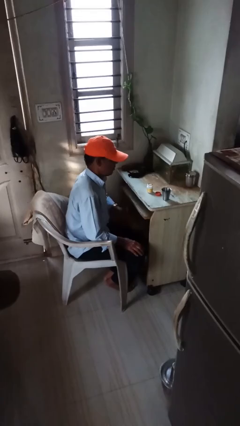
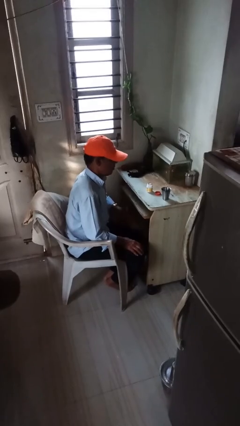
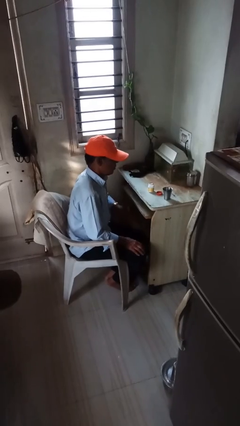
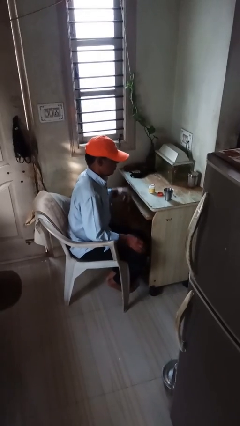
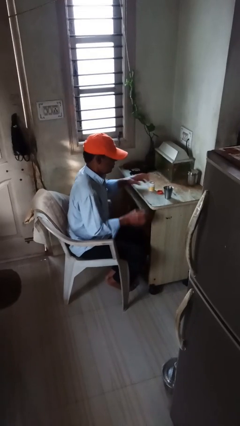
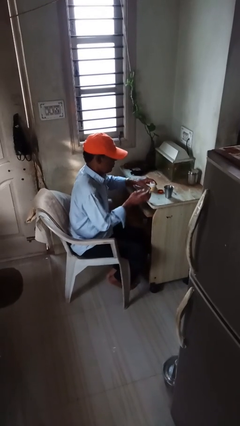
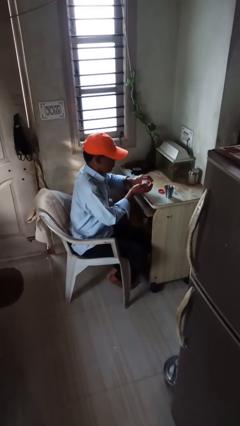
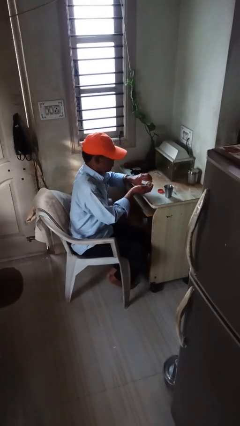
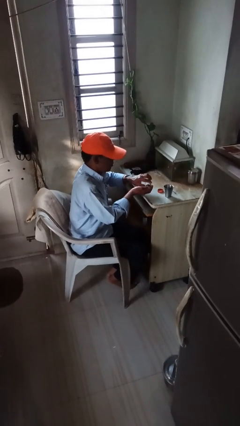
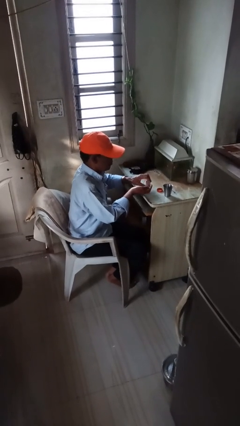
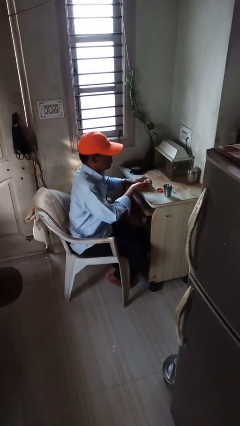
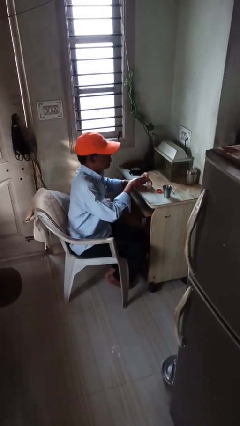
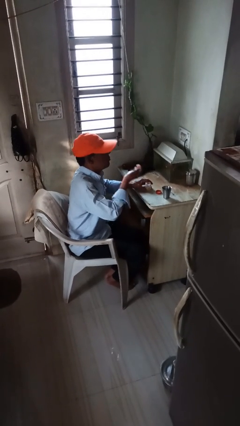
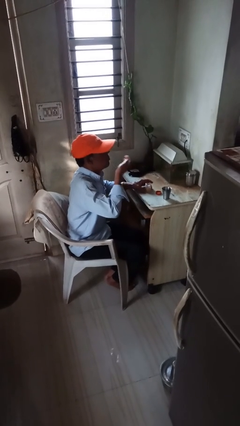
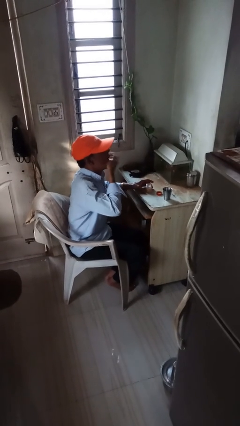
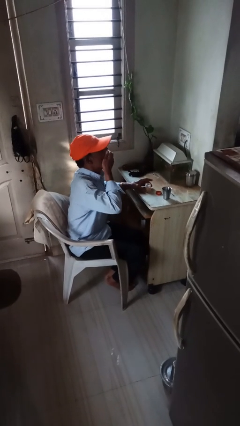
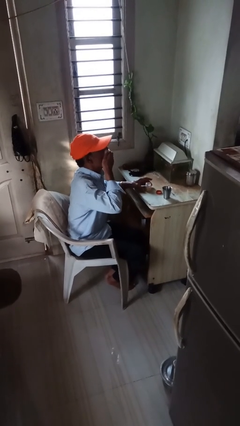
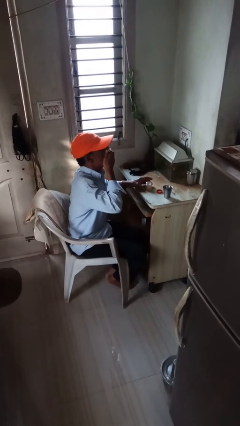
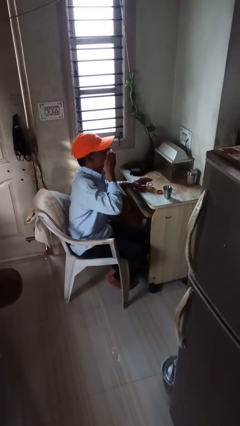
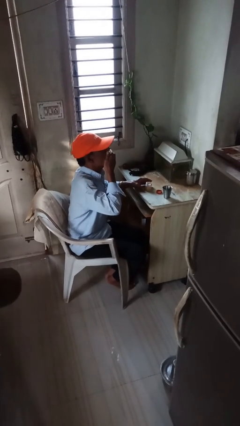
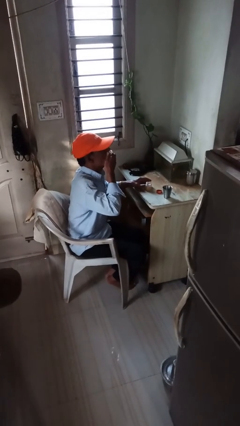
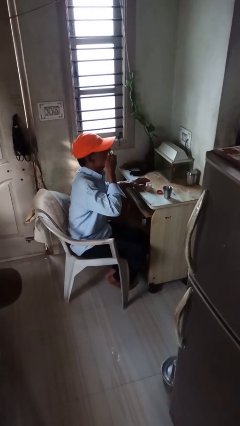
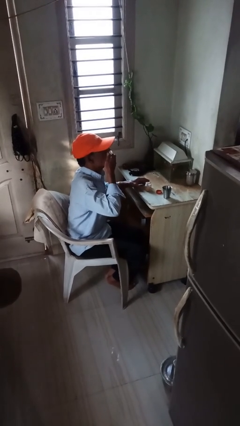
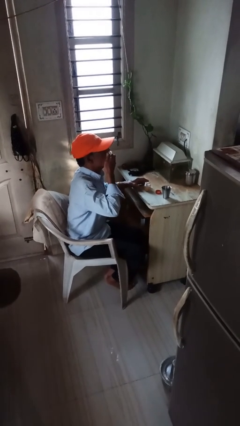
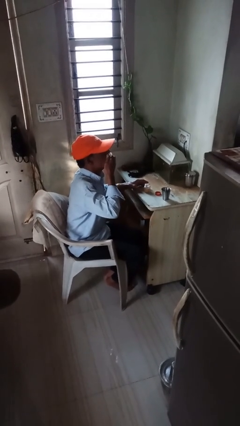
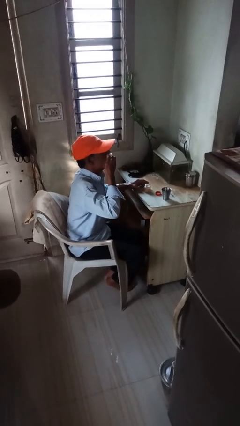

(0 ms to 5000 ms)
person takes medicine pills

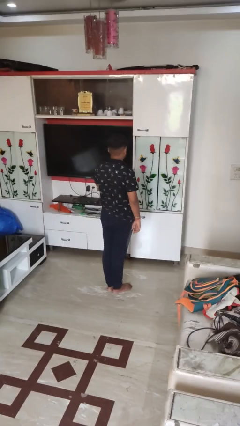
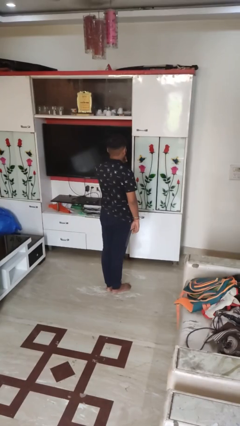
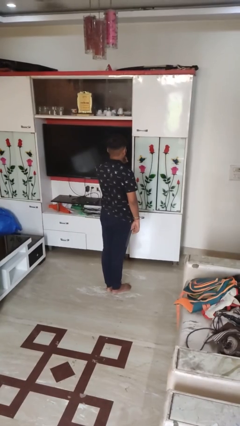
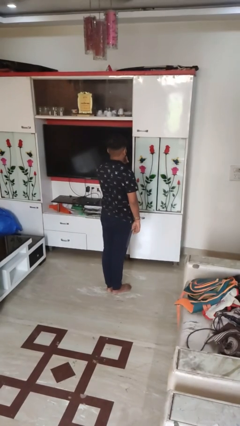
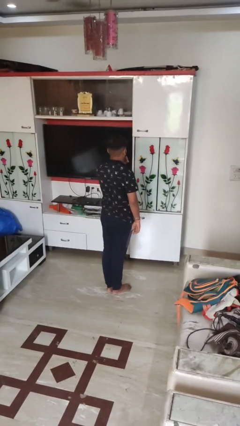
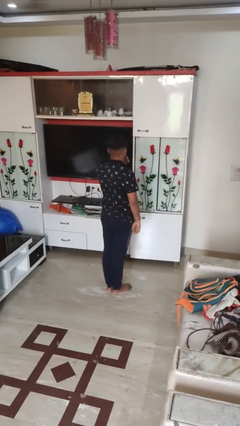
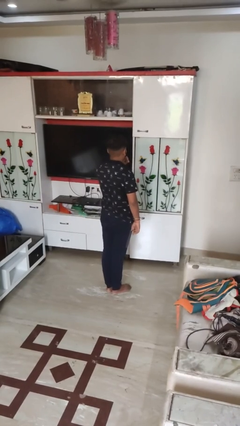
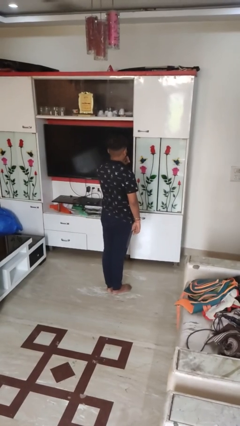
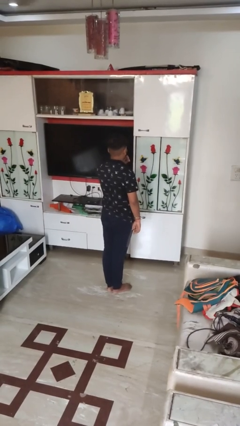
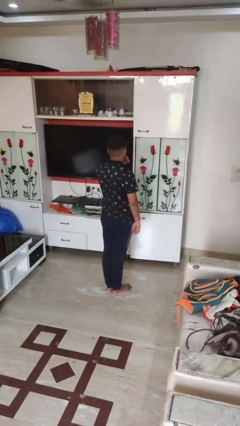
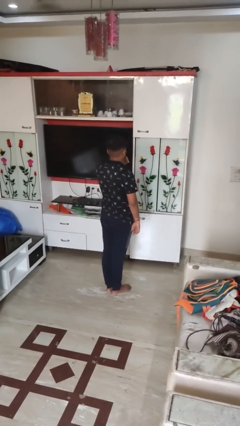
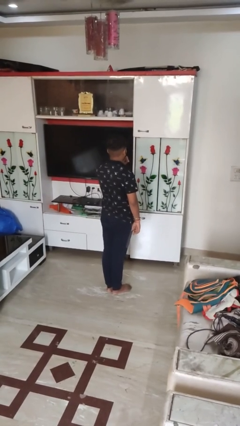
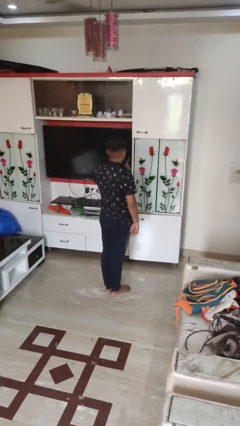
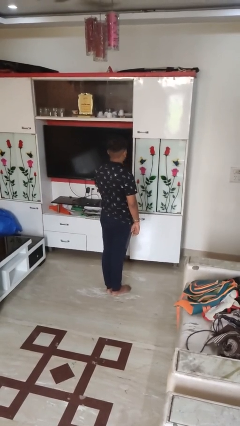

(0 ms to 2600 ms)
person gestures be quiet

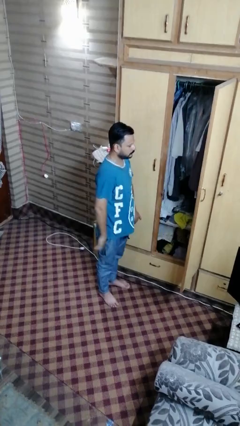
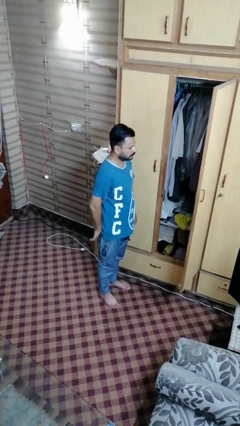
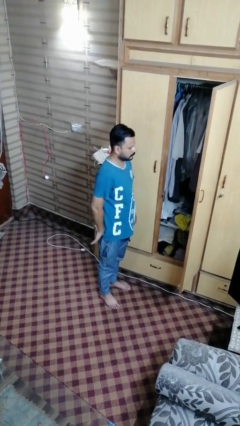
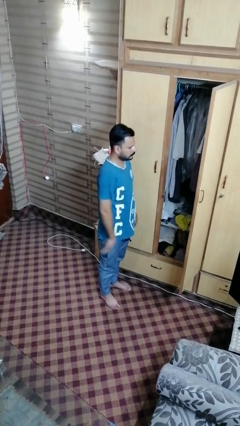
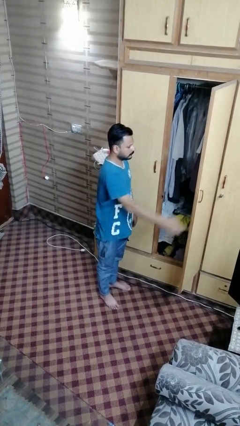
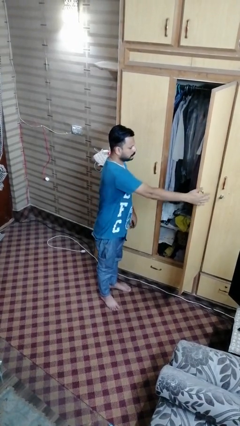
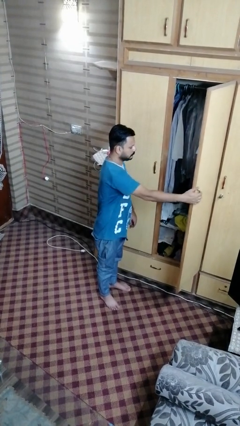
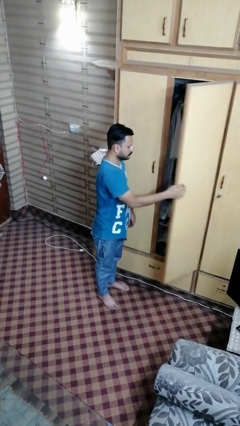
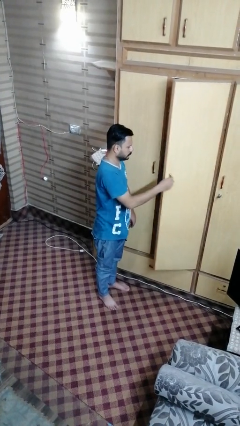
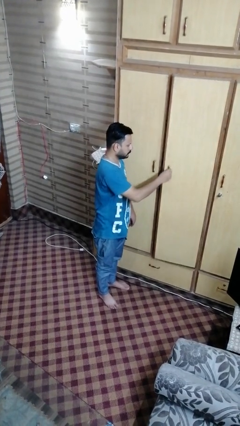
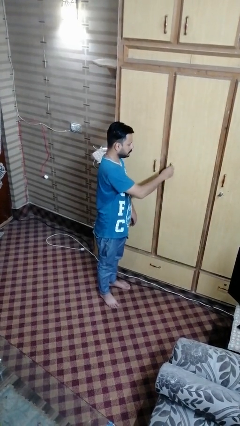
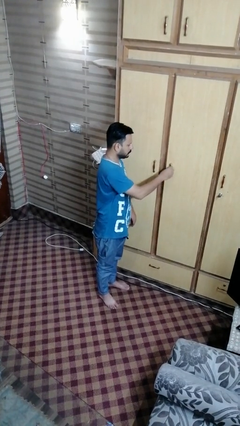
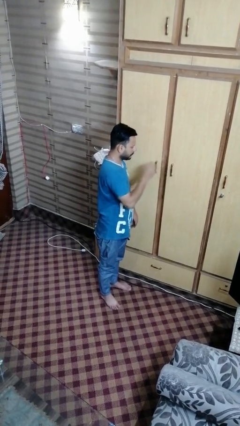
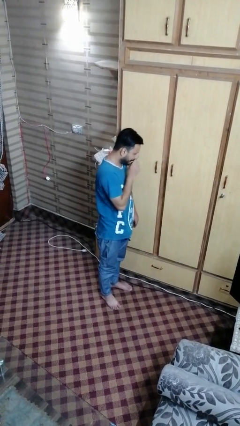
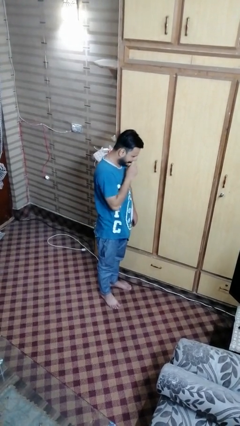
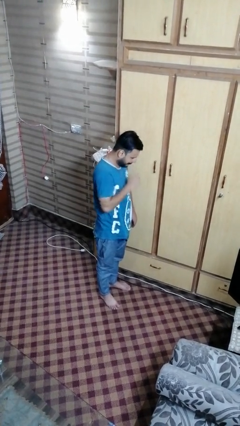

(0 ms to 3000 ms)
person closes closet door

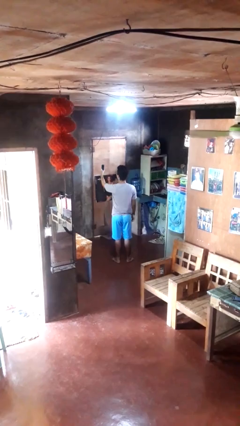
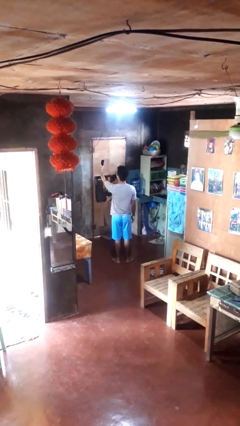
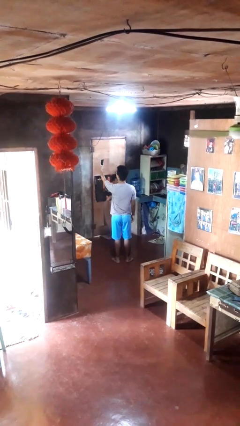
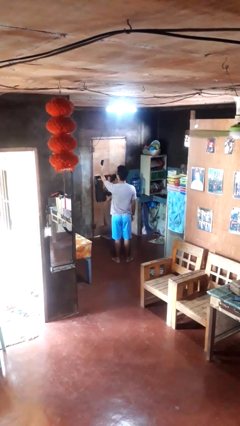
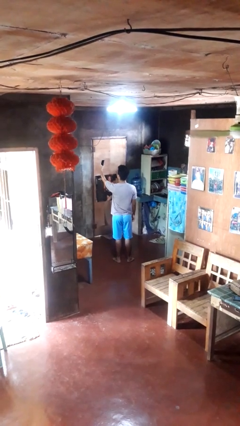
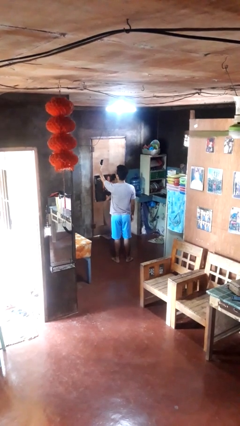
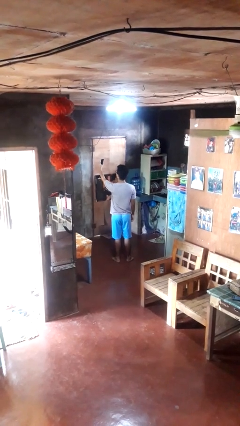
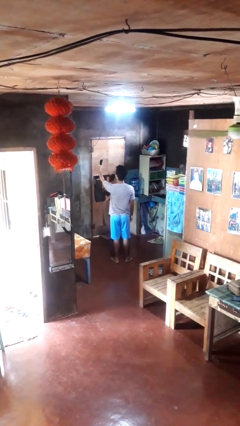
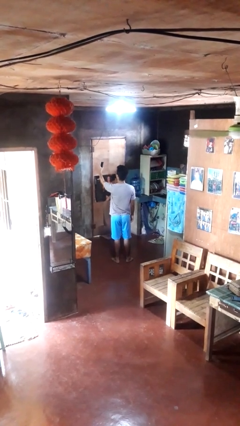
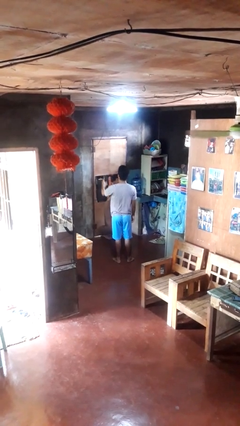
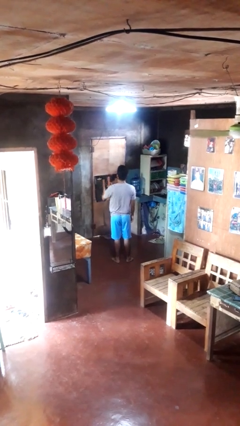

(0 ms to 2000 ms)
person takes selfie

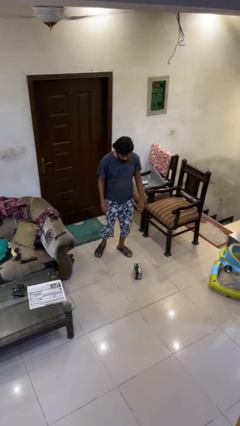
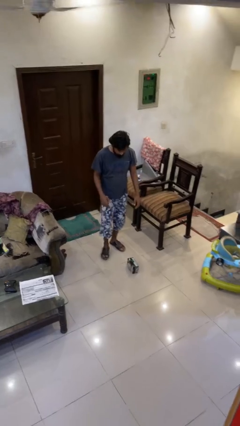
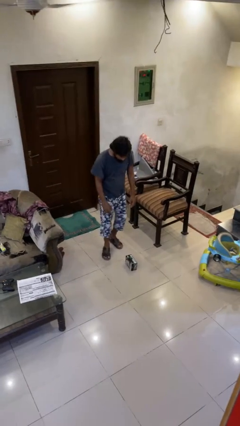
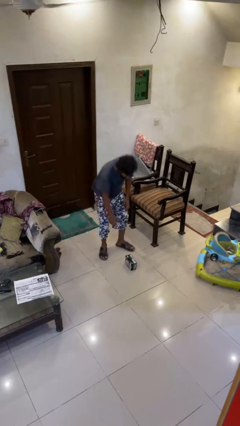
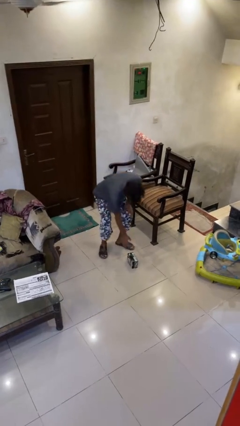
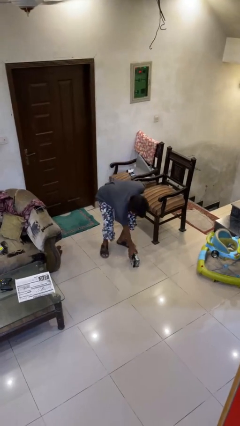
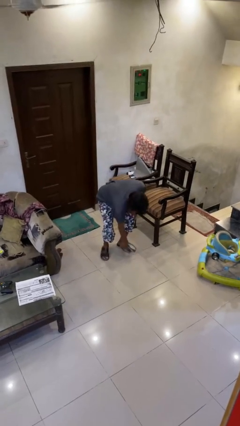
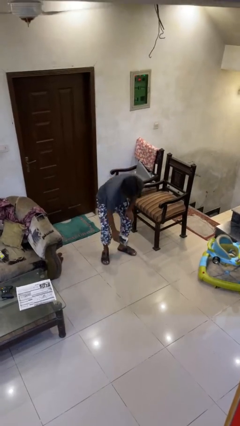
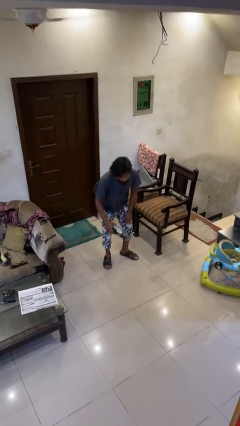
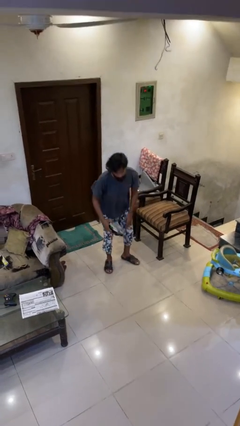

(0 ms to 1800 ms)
person picks up object from floor

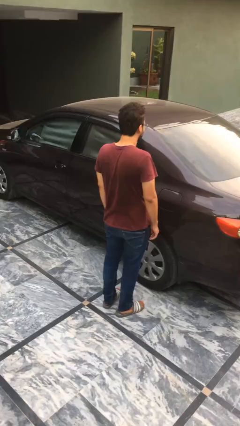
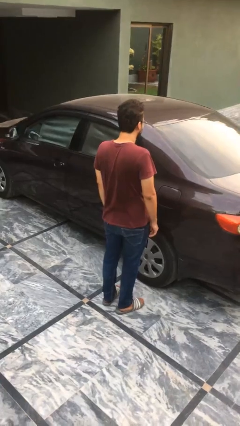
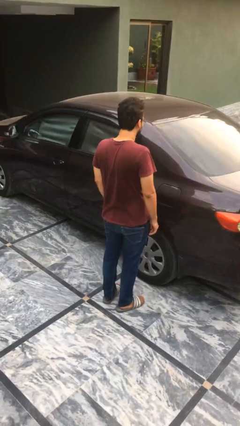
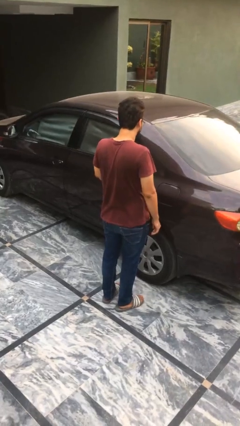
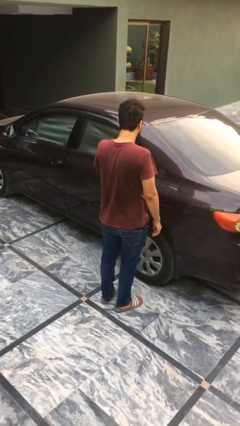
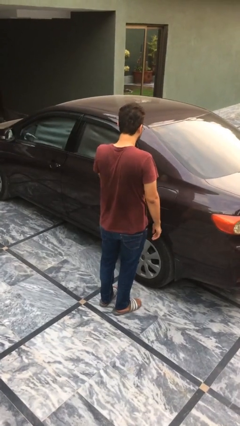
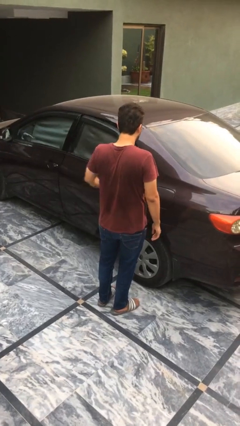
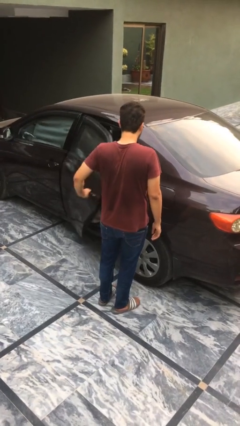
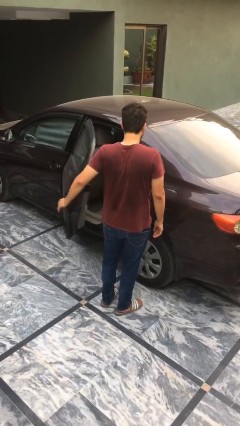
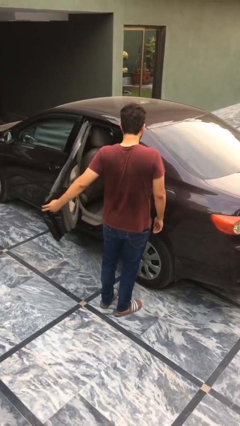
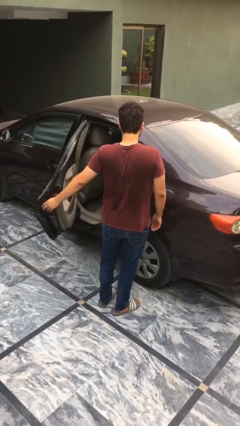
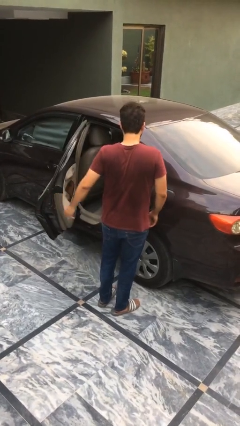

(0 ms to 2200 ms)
person opens car door

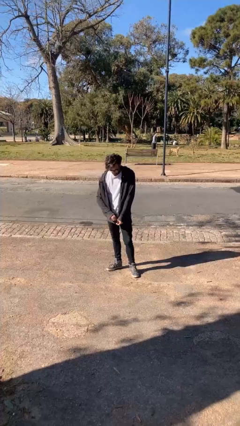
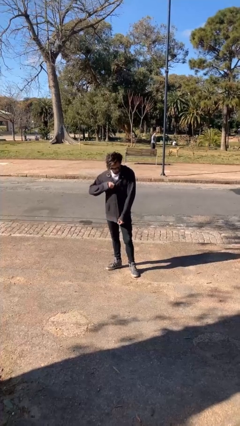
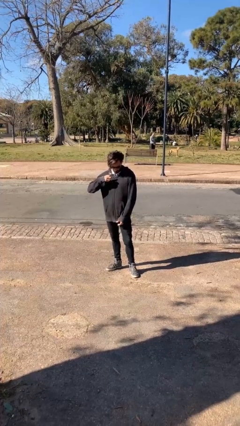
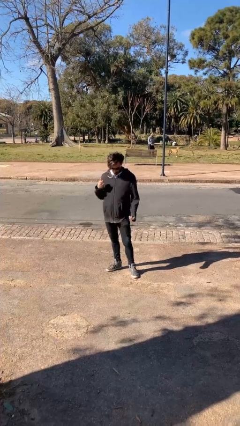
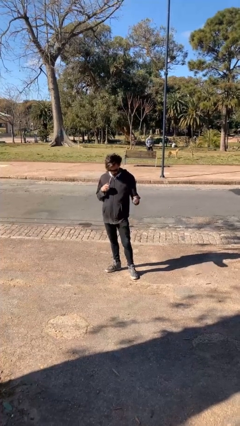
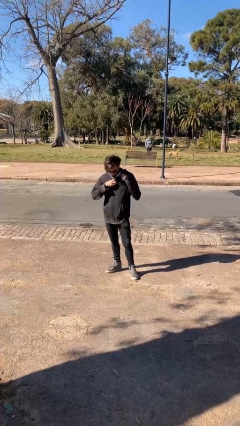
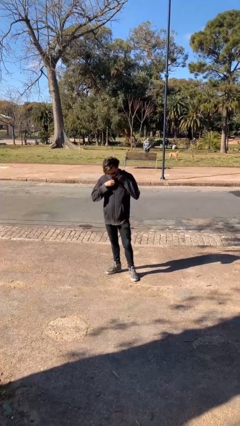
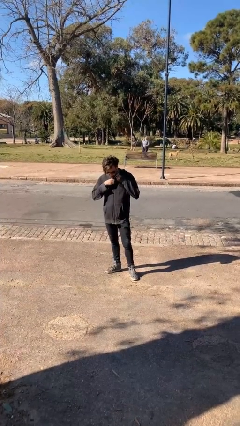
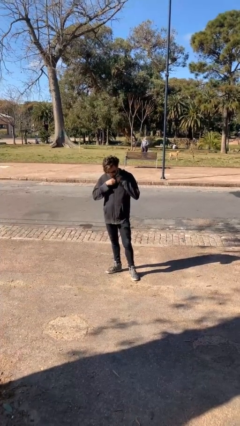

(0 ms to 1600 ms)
person zips up jacket
